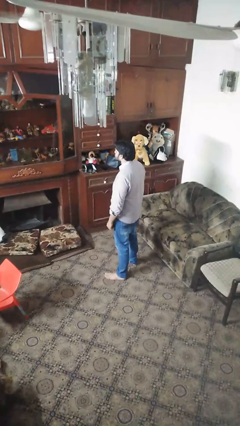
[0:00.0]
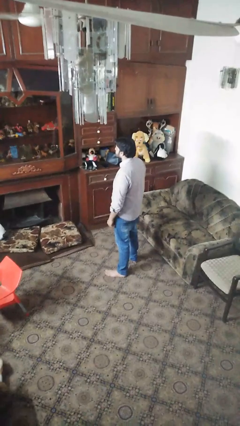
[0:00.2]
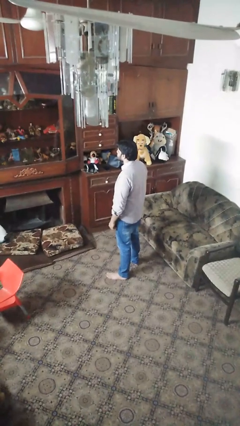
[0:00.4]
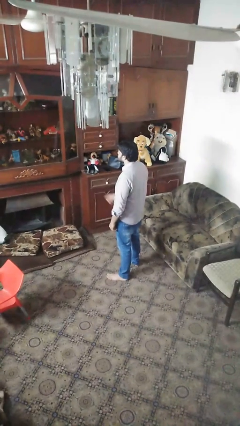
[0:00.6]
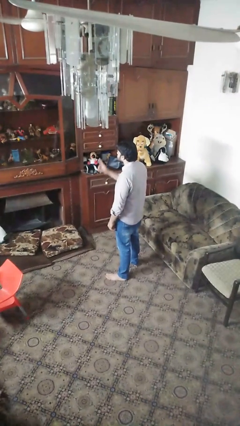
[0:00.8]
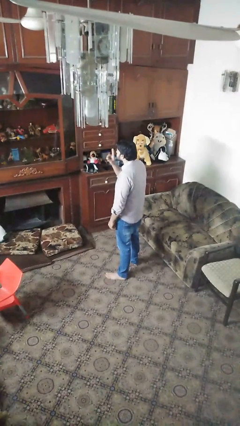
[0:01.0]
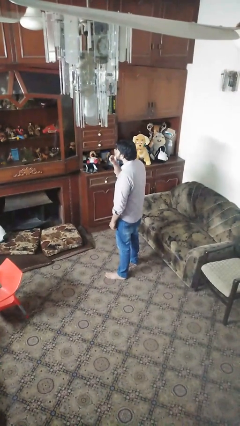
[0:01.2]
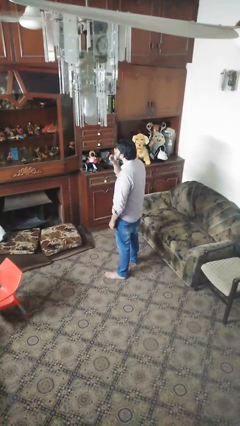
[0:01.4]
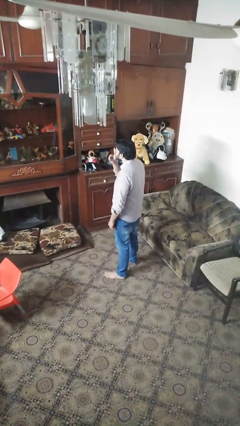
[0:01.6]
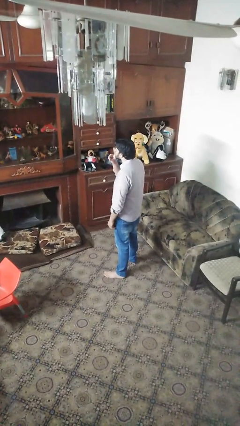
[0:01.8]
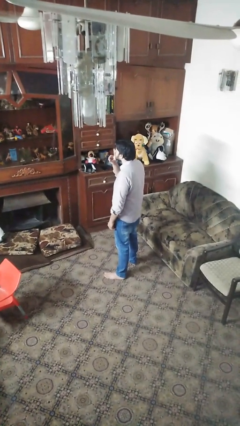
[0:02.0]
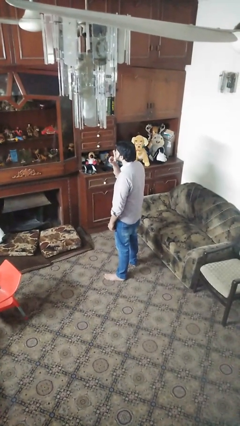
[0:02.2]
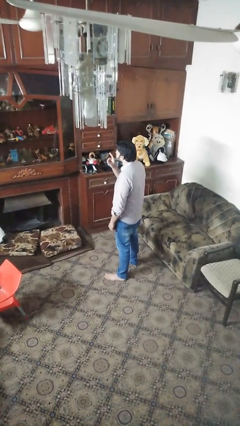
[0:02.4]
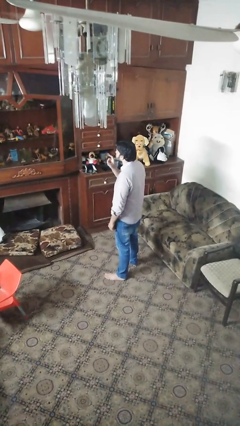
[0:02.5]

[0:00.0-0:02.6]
person gestures be quiet

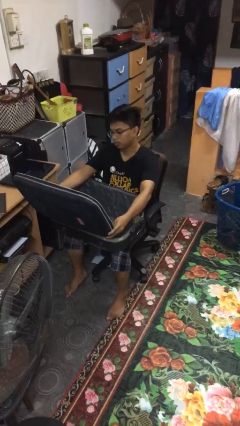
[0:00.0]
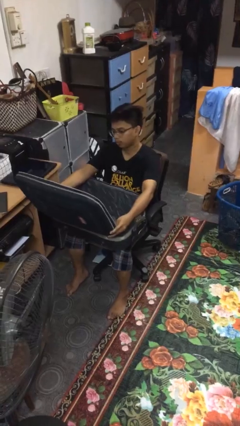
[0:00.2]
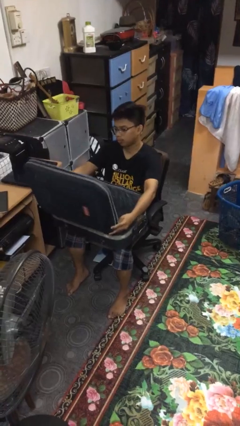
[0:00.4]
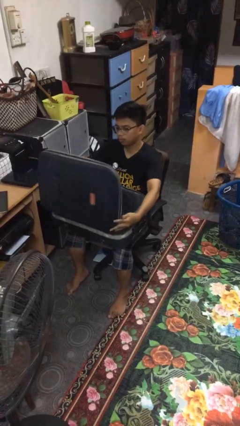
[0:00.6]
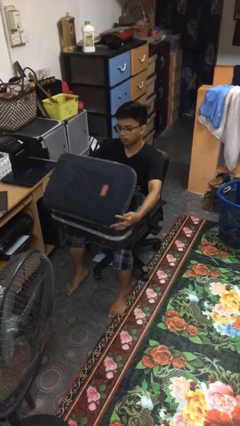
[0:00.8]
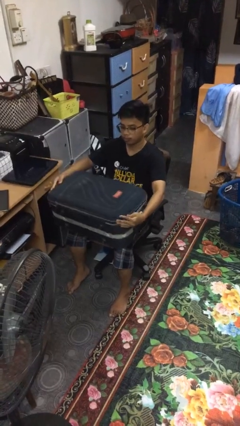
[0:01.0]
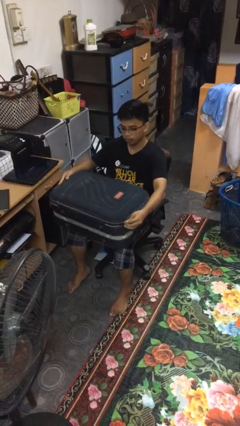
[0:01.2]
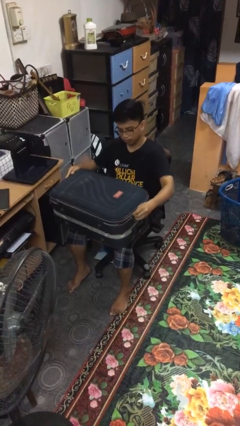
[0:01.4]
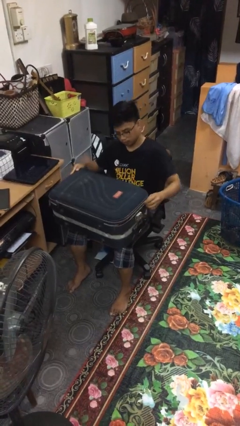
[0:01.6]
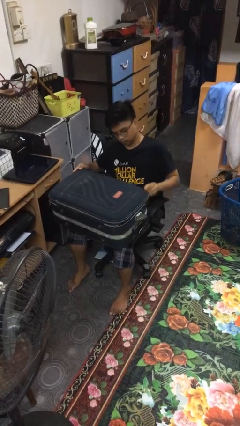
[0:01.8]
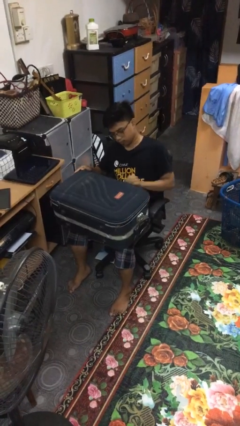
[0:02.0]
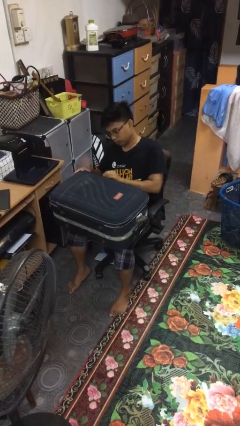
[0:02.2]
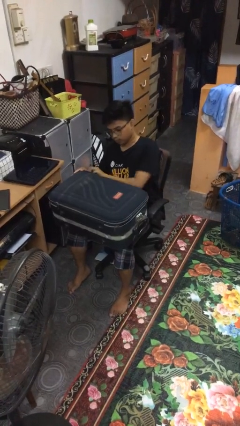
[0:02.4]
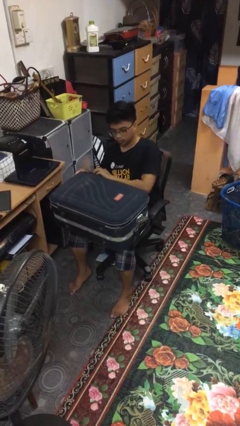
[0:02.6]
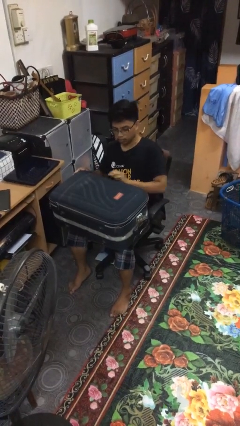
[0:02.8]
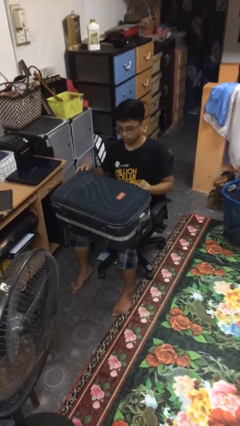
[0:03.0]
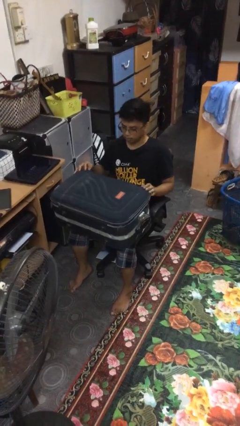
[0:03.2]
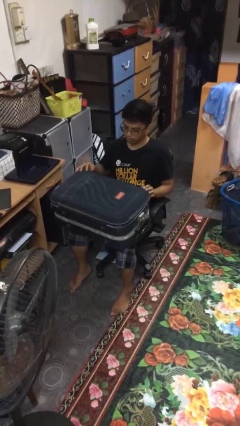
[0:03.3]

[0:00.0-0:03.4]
person closes suitcase

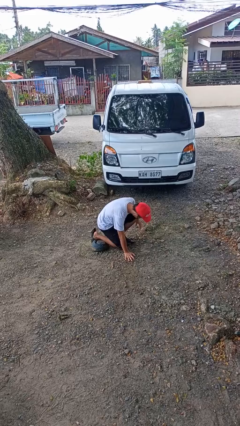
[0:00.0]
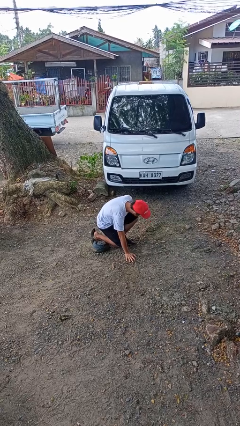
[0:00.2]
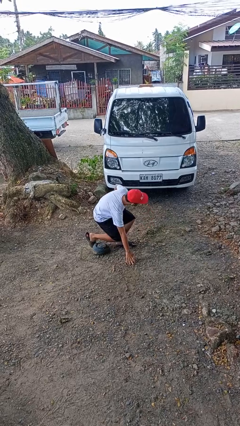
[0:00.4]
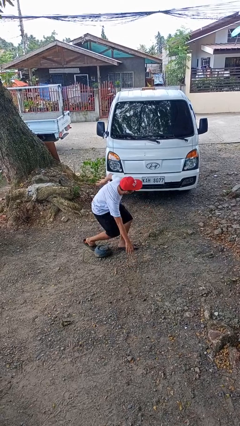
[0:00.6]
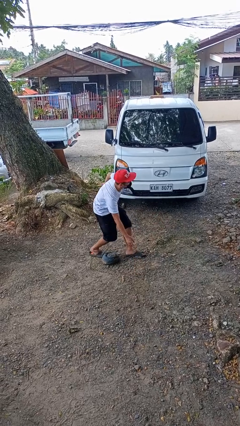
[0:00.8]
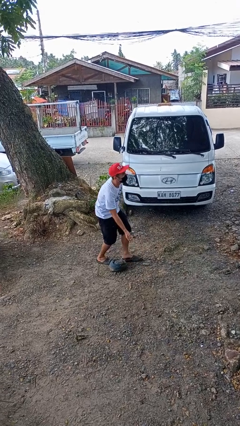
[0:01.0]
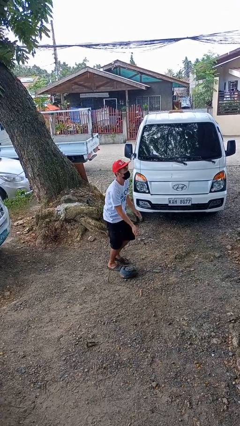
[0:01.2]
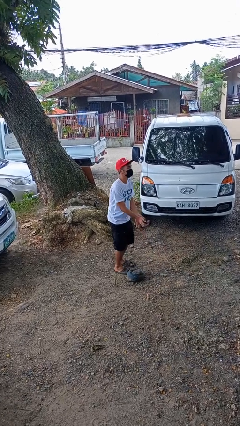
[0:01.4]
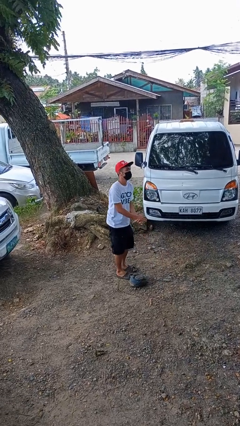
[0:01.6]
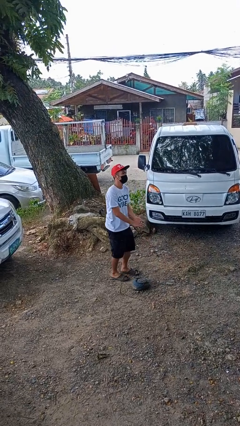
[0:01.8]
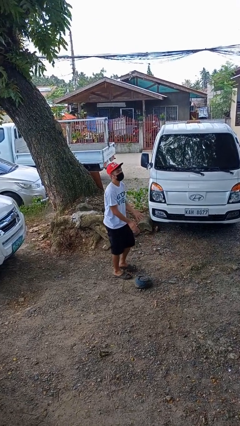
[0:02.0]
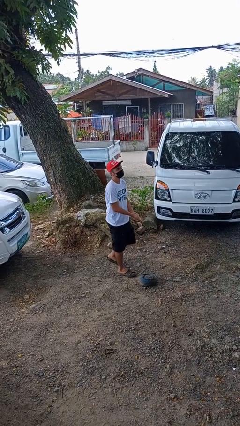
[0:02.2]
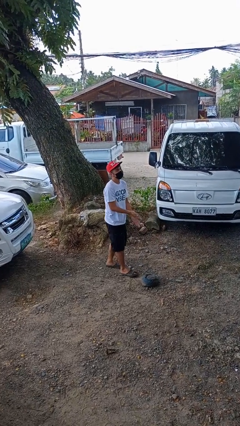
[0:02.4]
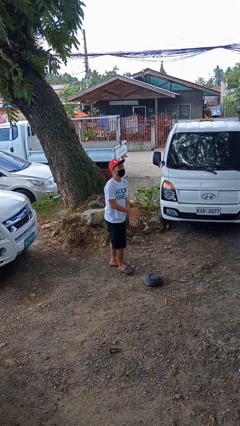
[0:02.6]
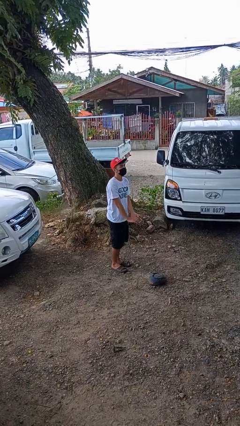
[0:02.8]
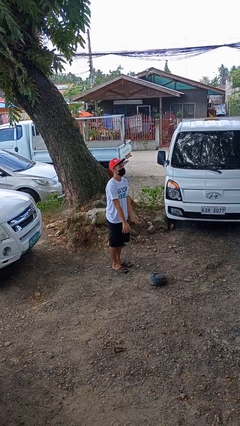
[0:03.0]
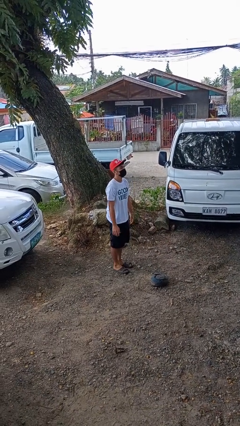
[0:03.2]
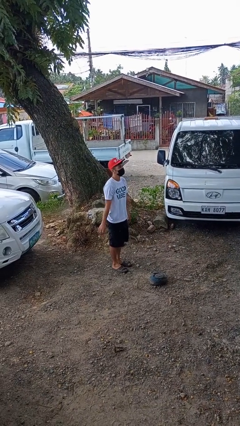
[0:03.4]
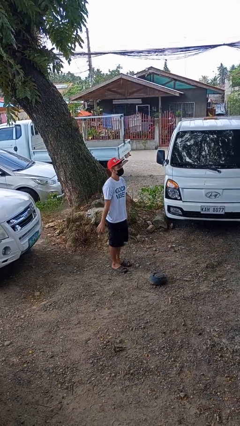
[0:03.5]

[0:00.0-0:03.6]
person stands up from floor

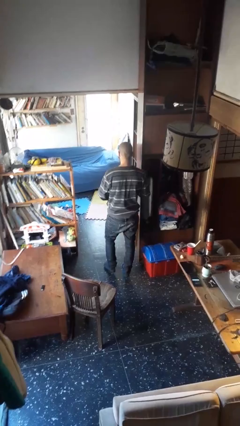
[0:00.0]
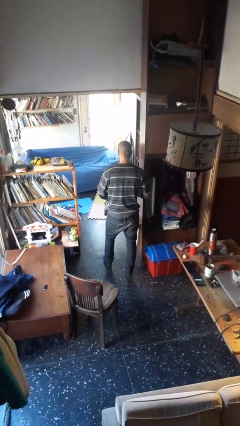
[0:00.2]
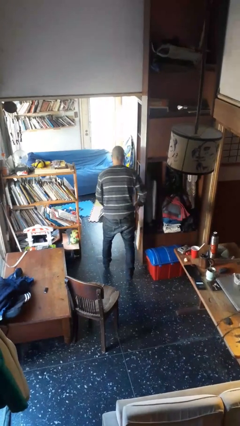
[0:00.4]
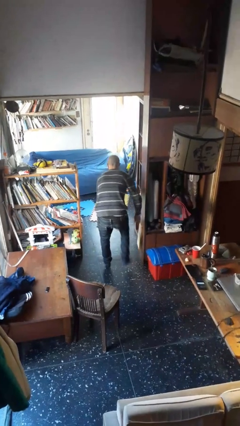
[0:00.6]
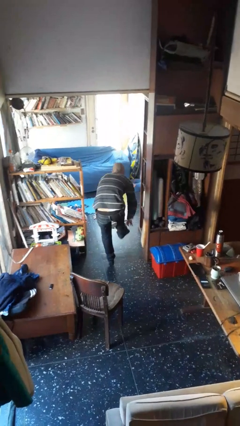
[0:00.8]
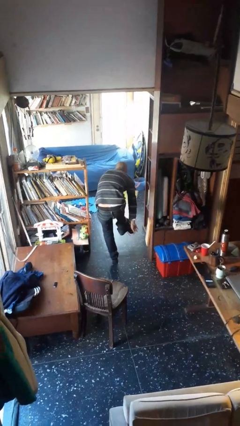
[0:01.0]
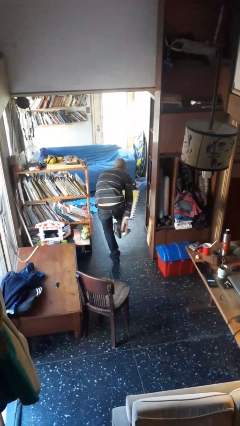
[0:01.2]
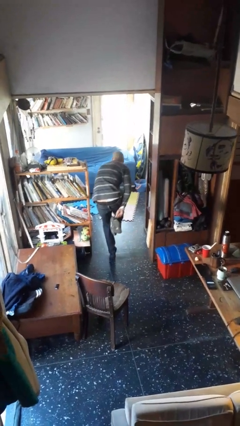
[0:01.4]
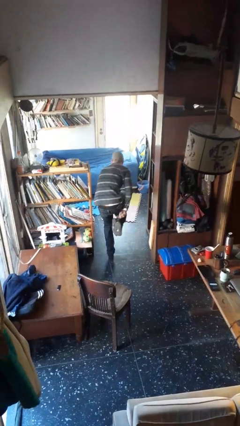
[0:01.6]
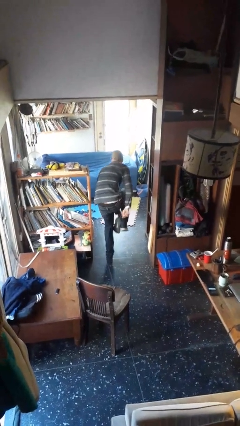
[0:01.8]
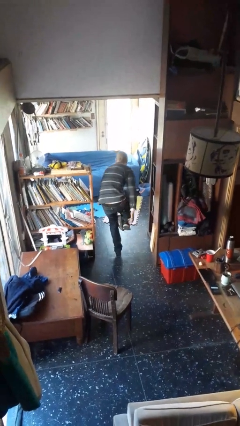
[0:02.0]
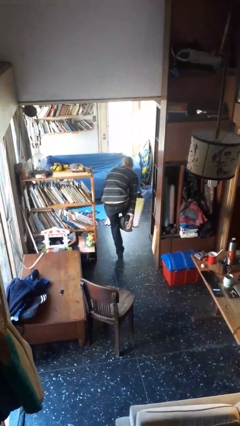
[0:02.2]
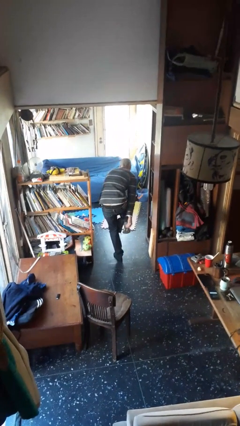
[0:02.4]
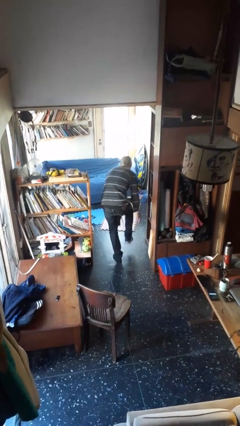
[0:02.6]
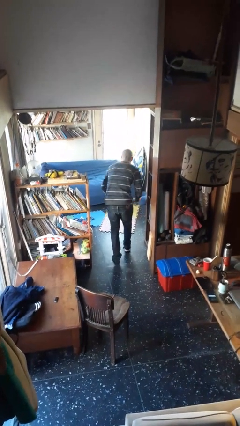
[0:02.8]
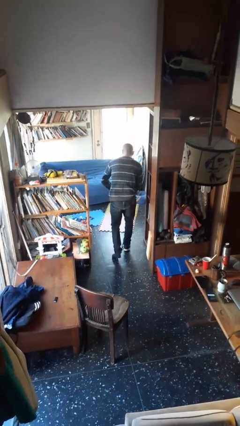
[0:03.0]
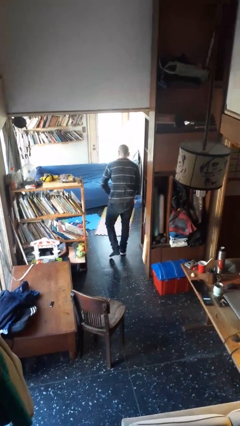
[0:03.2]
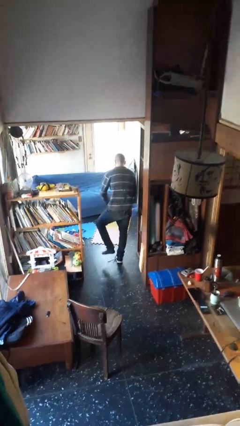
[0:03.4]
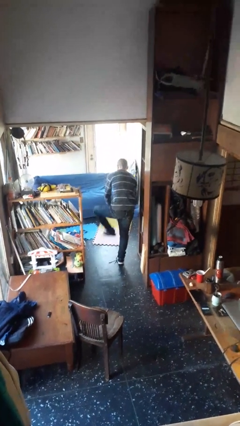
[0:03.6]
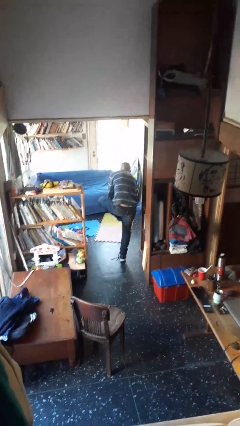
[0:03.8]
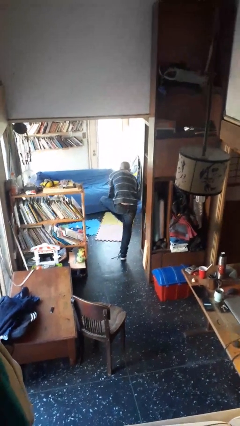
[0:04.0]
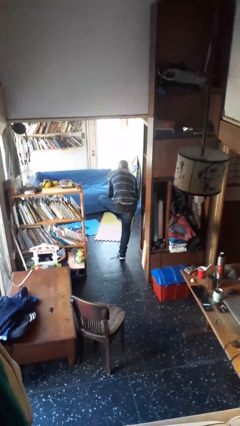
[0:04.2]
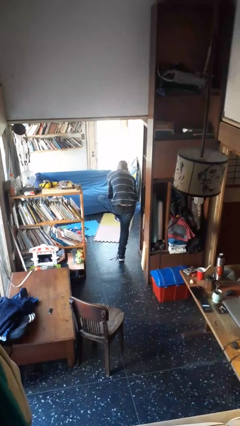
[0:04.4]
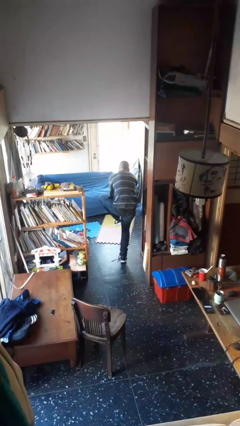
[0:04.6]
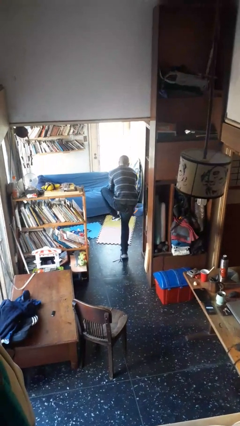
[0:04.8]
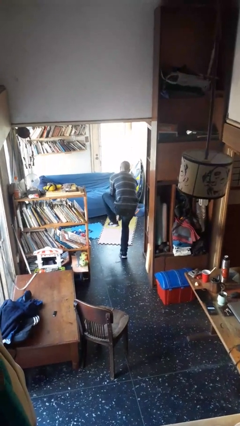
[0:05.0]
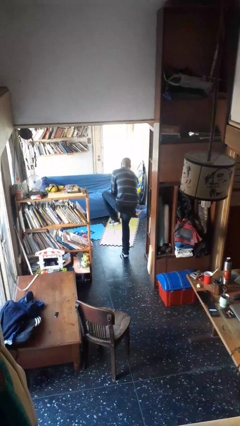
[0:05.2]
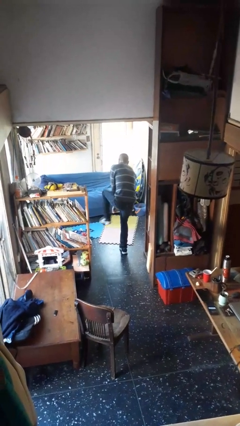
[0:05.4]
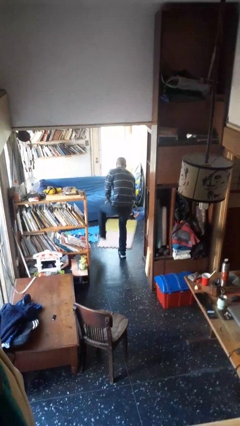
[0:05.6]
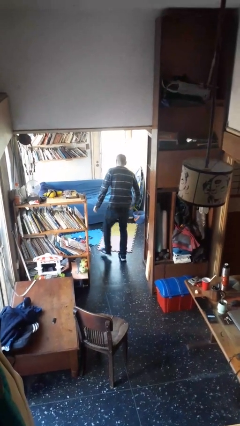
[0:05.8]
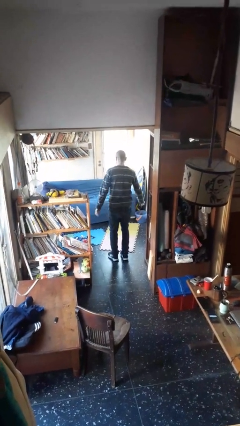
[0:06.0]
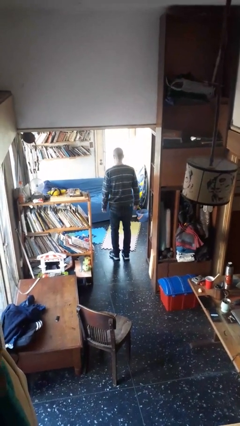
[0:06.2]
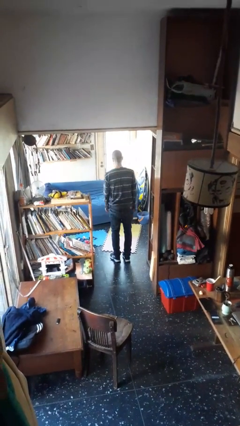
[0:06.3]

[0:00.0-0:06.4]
person puts on shoes

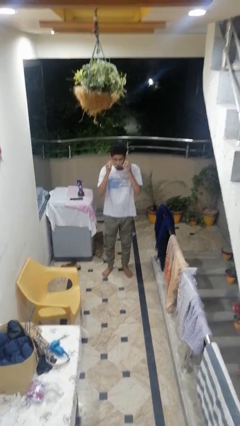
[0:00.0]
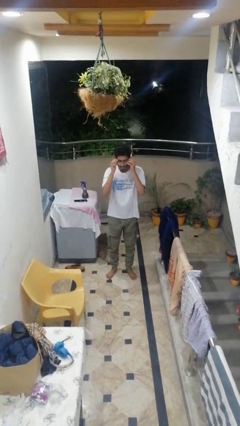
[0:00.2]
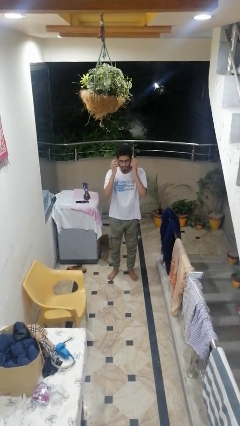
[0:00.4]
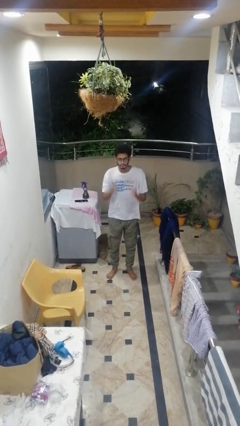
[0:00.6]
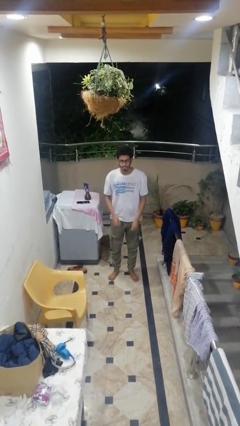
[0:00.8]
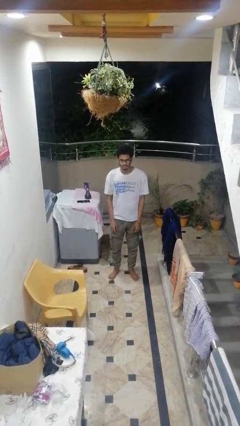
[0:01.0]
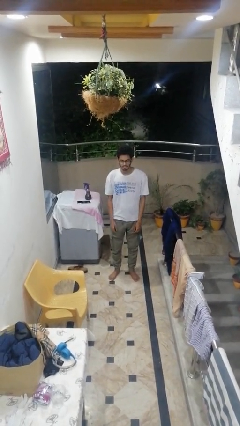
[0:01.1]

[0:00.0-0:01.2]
person puts on glasses

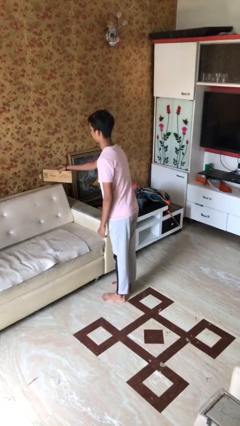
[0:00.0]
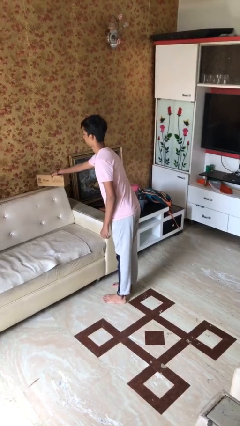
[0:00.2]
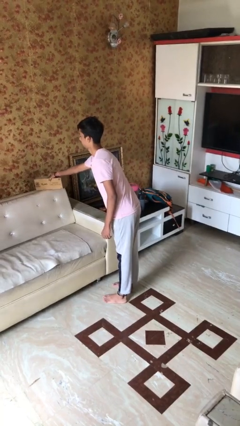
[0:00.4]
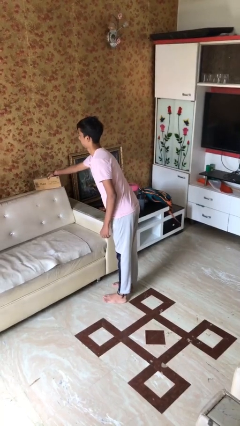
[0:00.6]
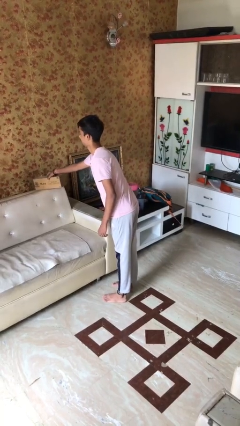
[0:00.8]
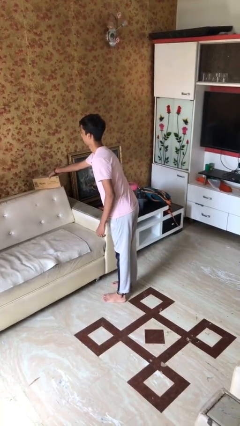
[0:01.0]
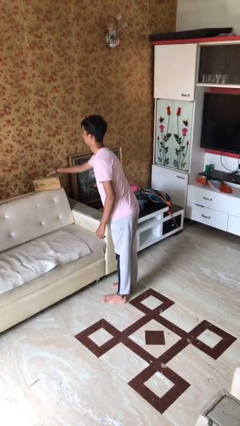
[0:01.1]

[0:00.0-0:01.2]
person puts down object on couch
